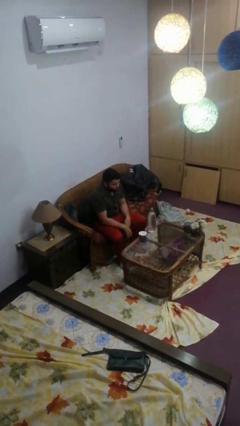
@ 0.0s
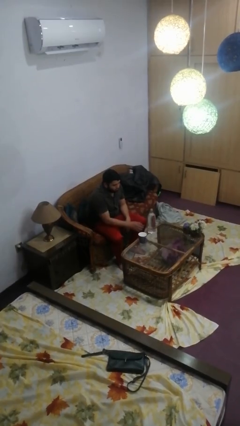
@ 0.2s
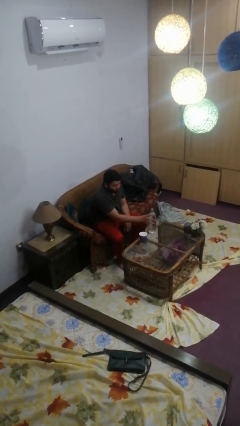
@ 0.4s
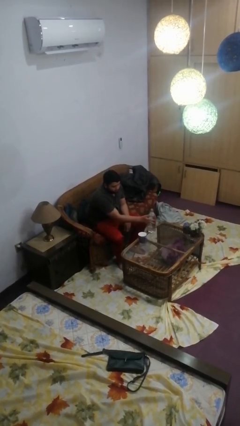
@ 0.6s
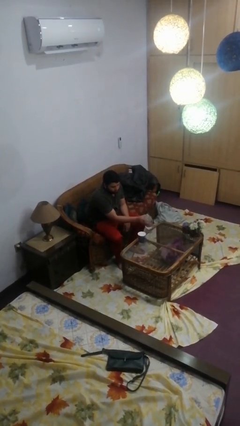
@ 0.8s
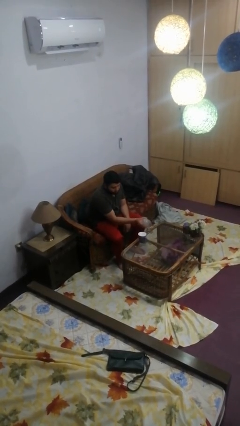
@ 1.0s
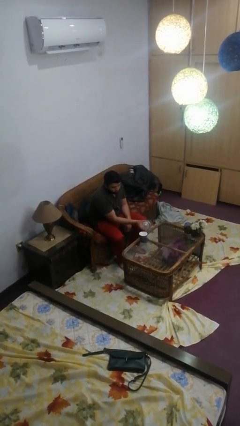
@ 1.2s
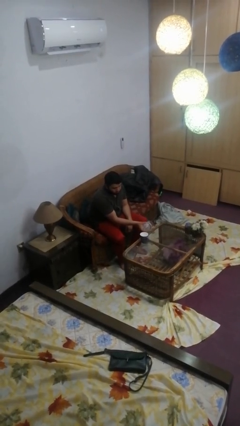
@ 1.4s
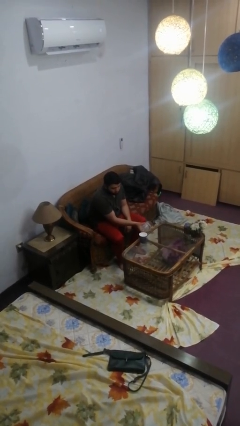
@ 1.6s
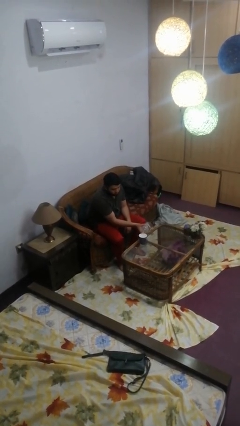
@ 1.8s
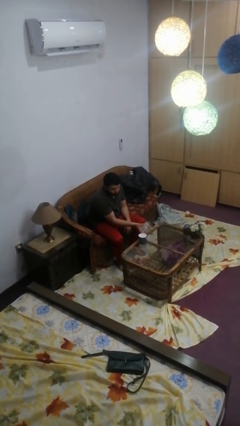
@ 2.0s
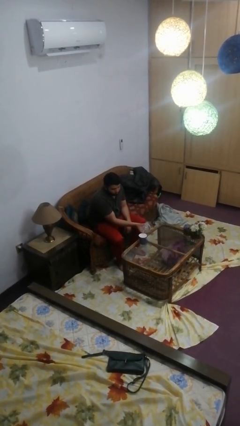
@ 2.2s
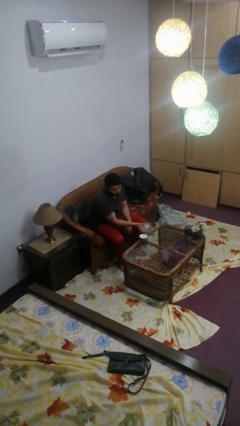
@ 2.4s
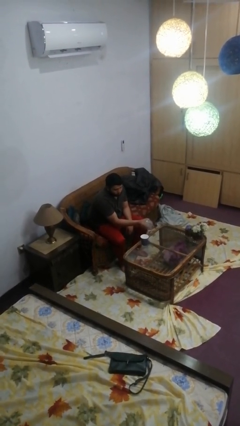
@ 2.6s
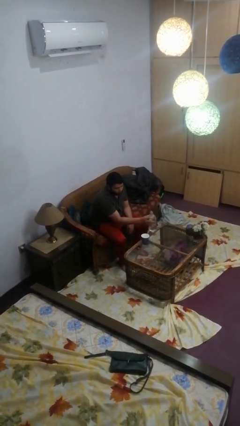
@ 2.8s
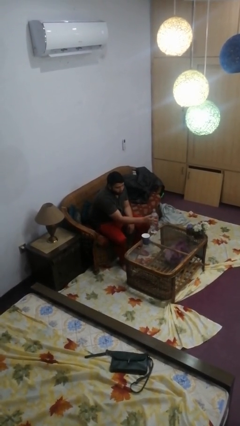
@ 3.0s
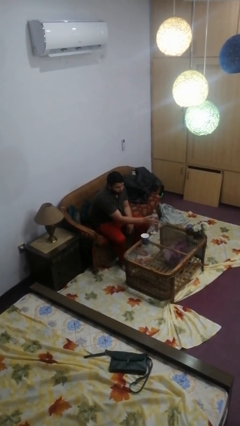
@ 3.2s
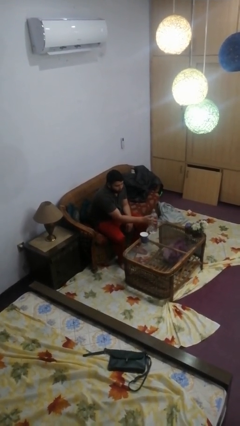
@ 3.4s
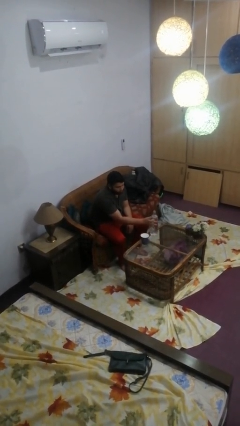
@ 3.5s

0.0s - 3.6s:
person pours liquid into cup

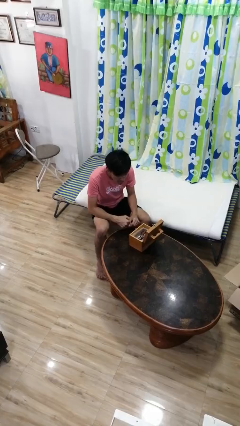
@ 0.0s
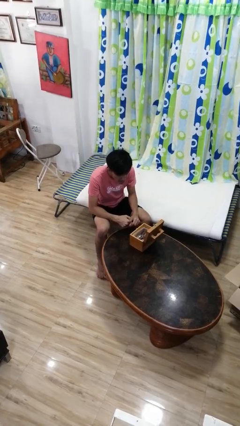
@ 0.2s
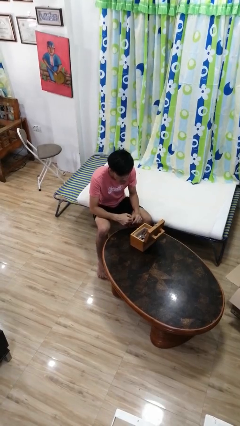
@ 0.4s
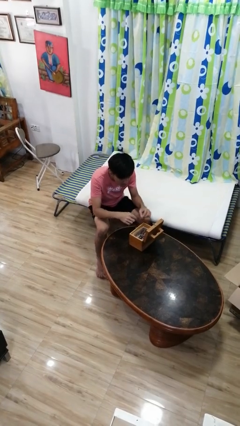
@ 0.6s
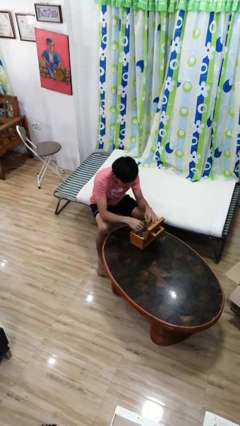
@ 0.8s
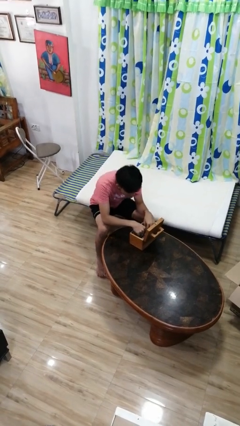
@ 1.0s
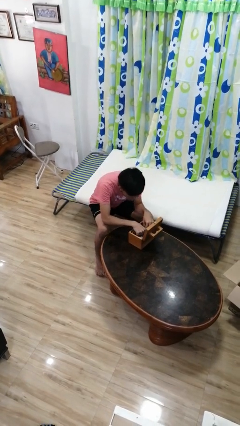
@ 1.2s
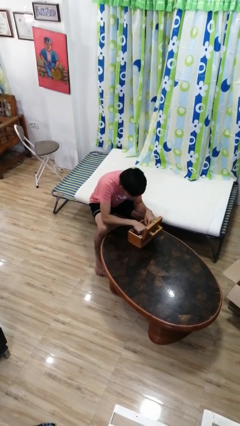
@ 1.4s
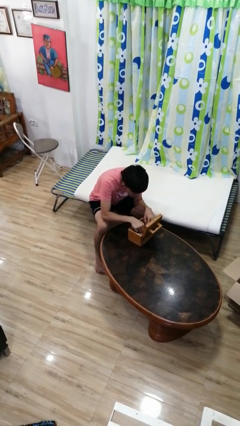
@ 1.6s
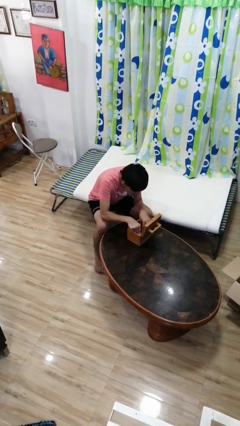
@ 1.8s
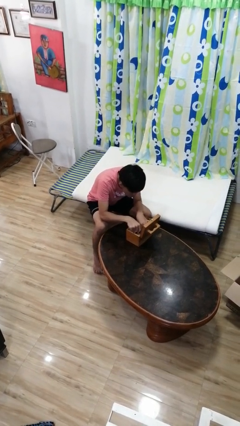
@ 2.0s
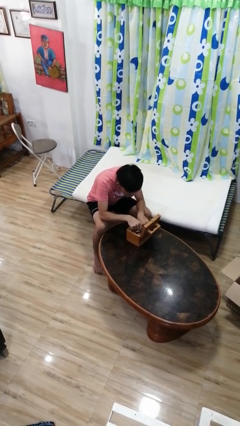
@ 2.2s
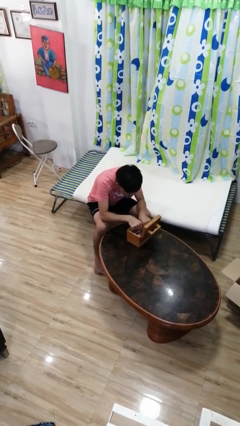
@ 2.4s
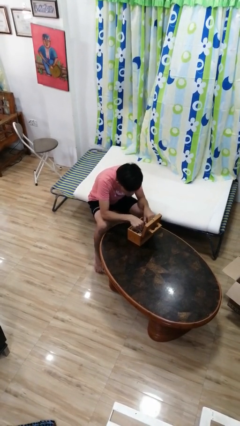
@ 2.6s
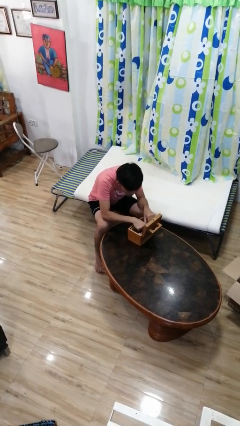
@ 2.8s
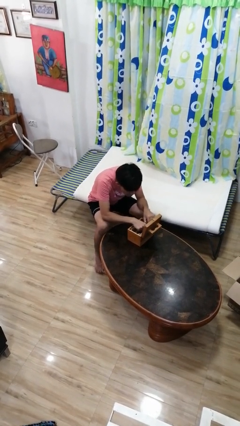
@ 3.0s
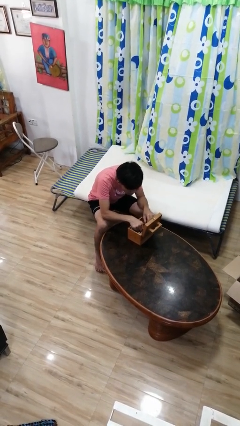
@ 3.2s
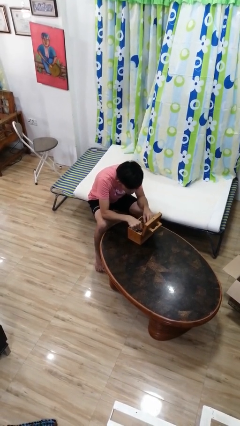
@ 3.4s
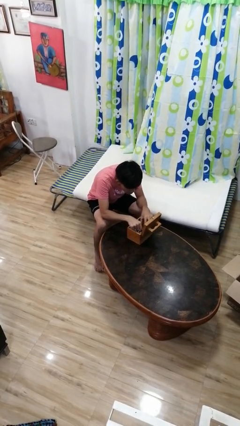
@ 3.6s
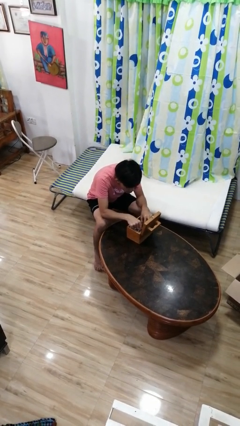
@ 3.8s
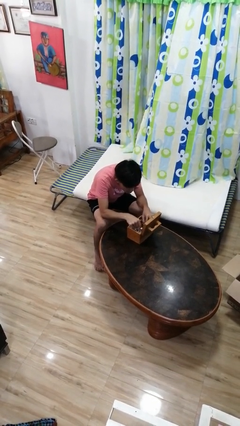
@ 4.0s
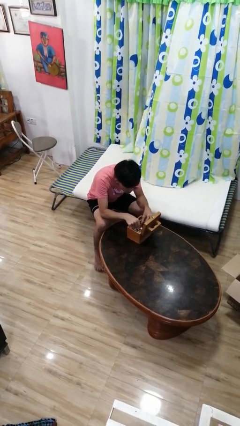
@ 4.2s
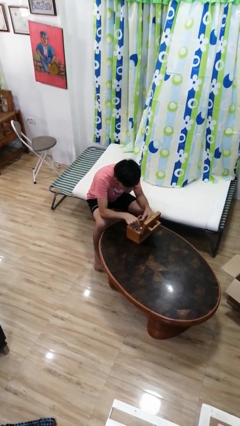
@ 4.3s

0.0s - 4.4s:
person searches jewelry box

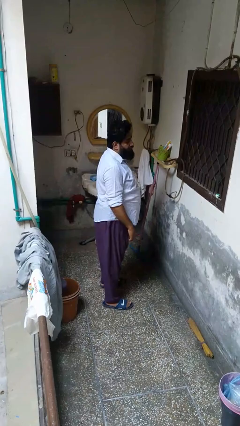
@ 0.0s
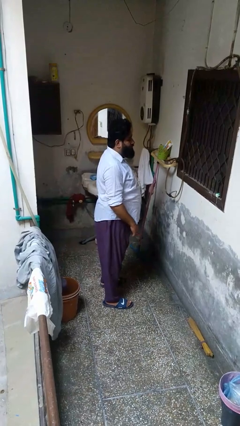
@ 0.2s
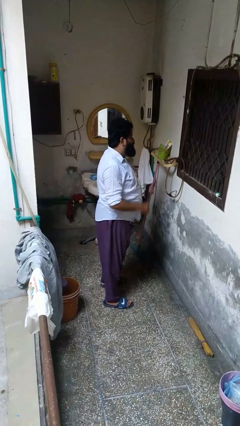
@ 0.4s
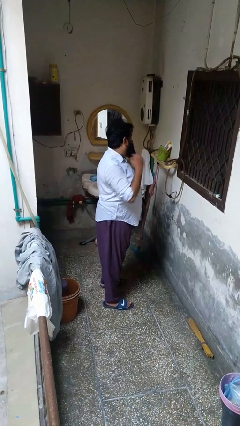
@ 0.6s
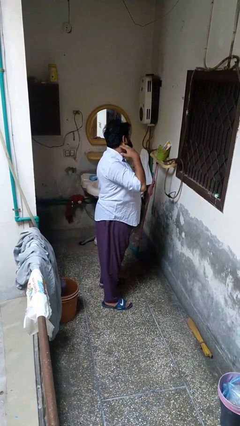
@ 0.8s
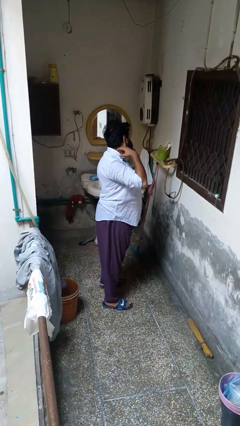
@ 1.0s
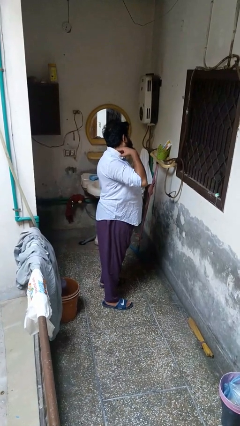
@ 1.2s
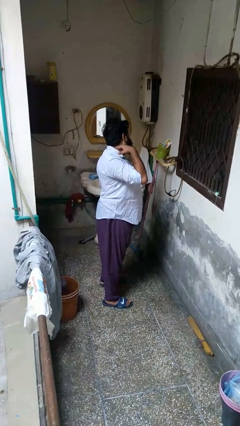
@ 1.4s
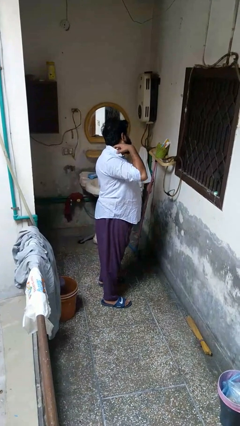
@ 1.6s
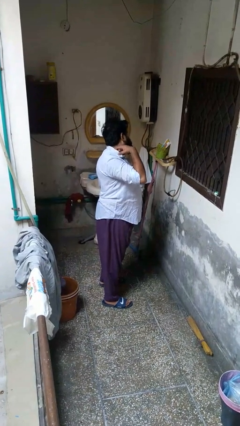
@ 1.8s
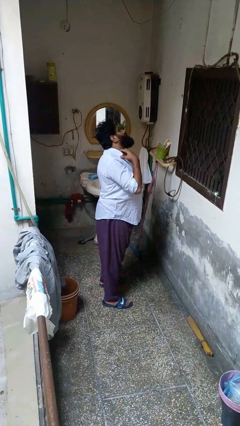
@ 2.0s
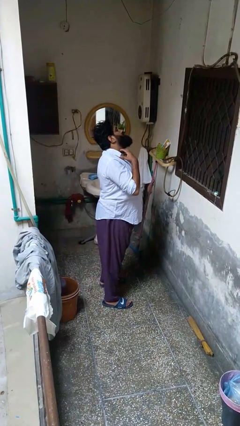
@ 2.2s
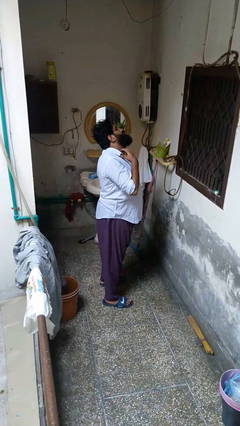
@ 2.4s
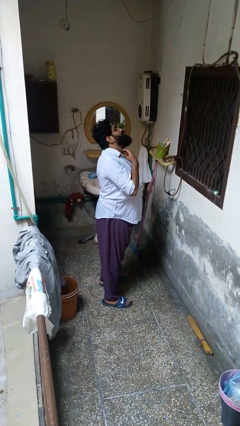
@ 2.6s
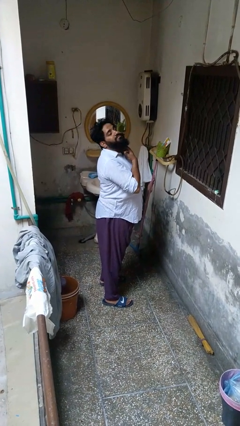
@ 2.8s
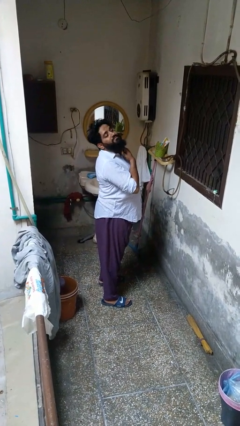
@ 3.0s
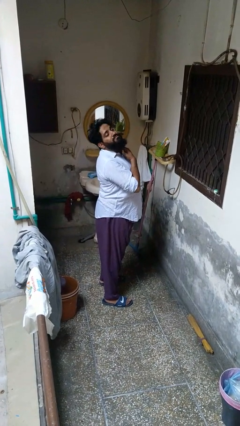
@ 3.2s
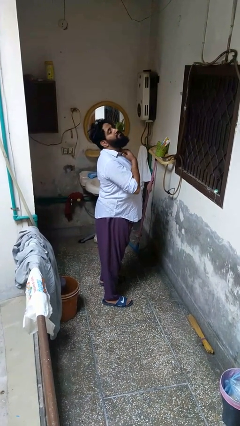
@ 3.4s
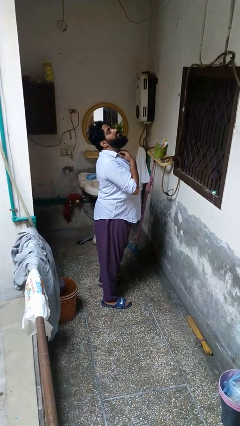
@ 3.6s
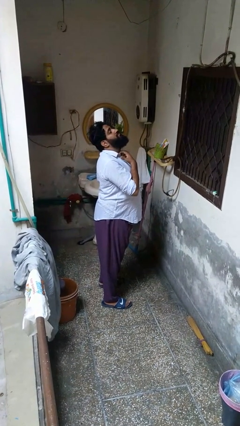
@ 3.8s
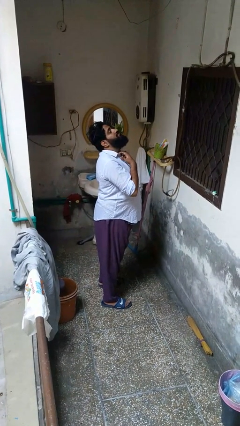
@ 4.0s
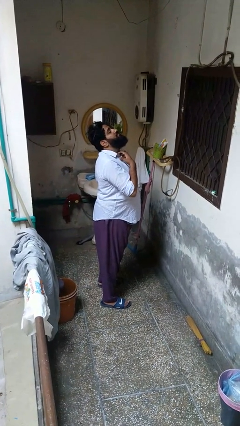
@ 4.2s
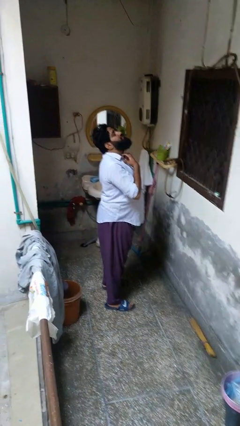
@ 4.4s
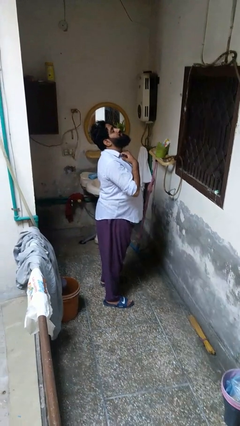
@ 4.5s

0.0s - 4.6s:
person rubs neck

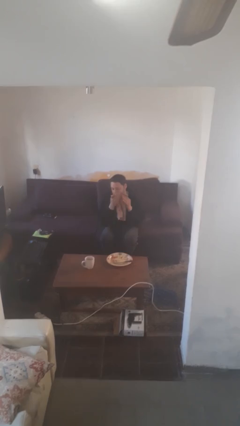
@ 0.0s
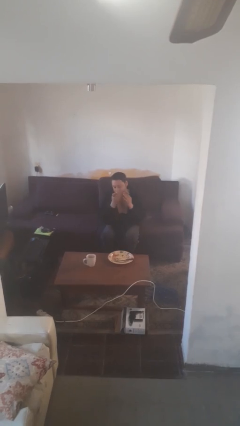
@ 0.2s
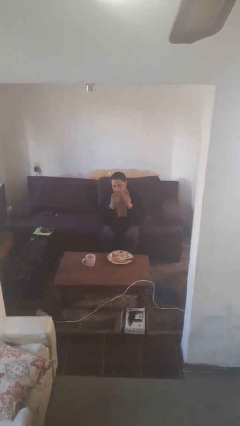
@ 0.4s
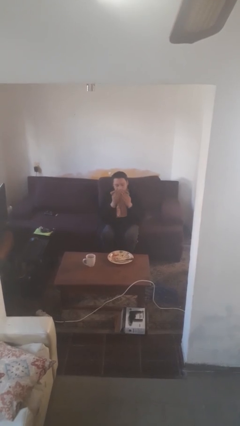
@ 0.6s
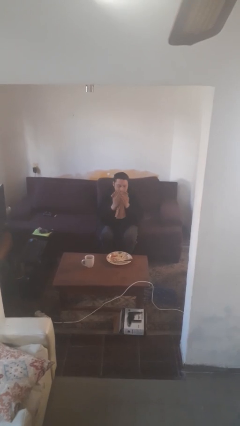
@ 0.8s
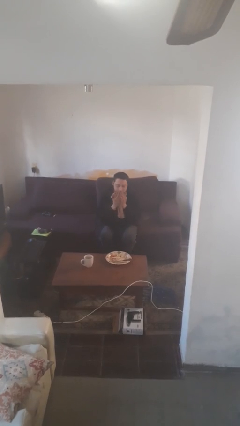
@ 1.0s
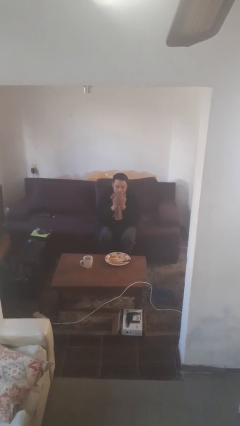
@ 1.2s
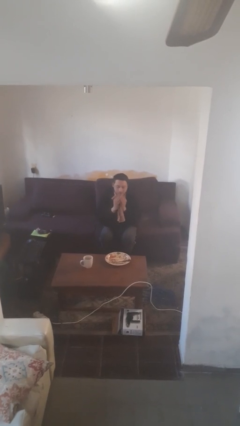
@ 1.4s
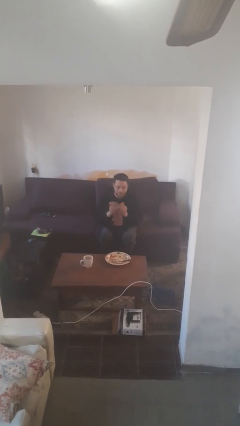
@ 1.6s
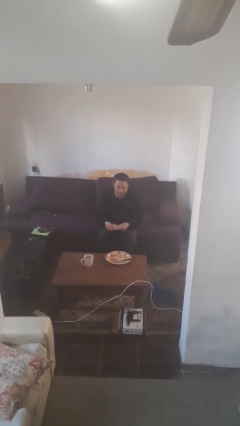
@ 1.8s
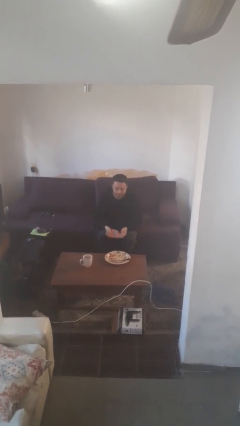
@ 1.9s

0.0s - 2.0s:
person wipes mouth with napkin

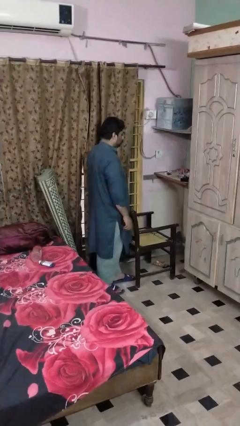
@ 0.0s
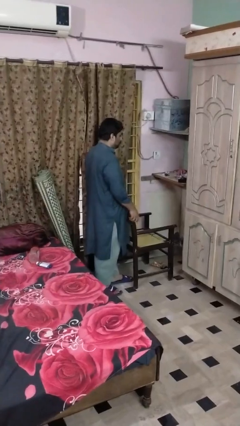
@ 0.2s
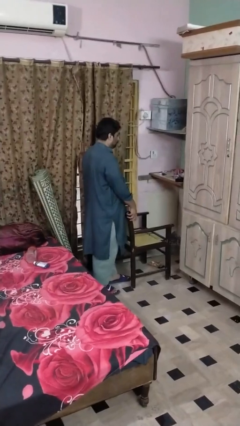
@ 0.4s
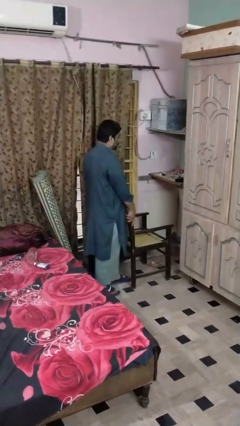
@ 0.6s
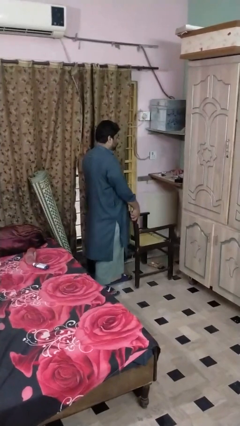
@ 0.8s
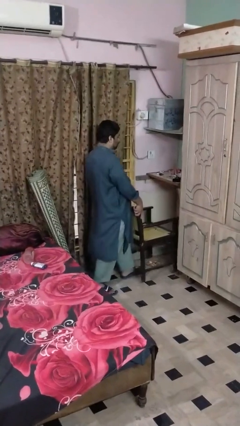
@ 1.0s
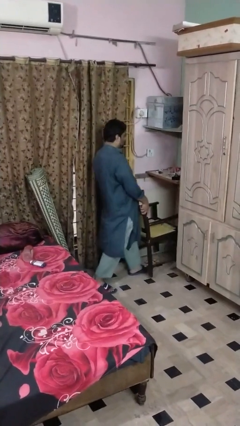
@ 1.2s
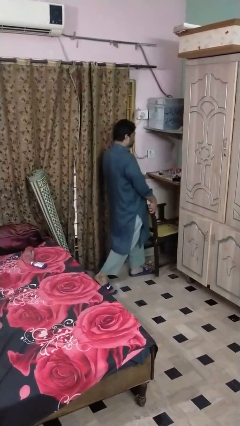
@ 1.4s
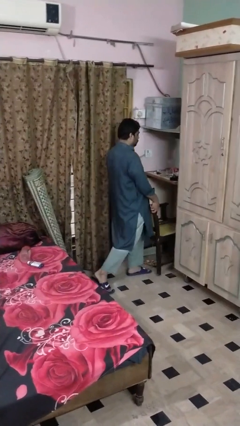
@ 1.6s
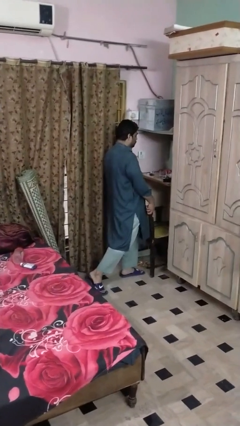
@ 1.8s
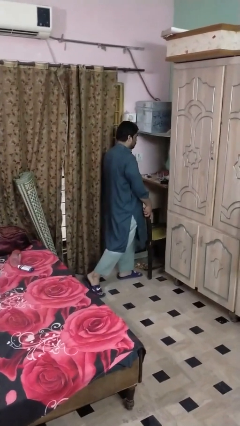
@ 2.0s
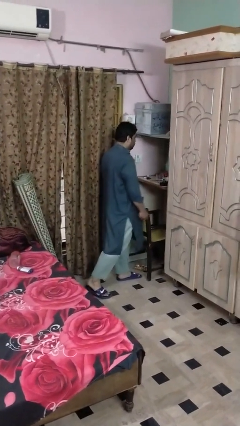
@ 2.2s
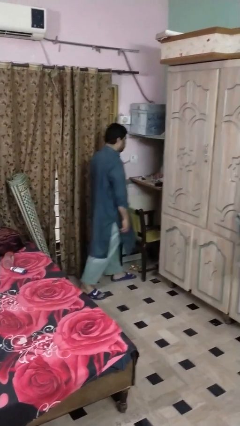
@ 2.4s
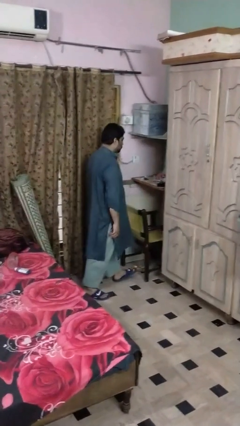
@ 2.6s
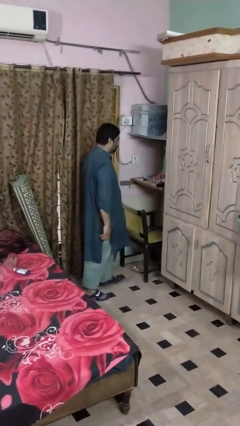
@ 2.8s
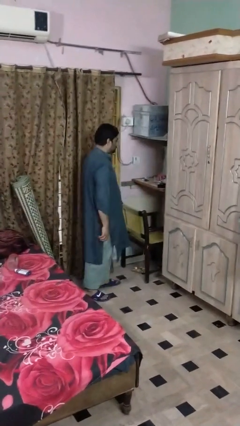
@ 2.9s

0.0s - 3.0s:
person pushes in chair

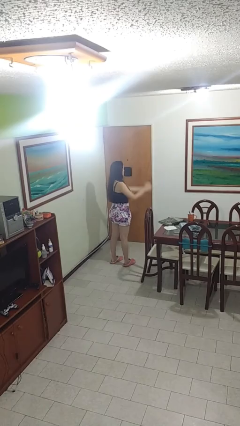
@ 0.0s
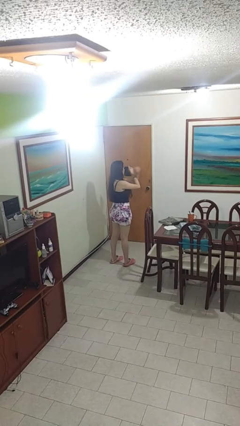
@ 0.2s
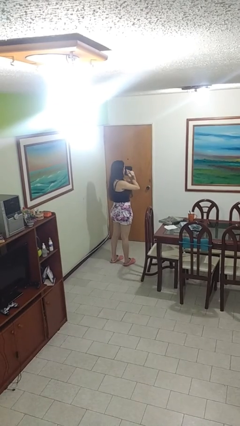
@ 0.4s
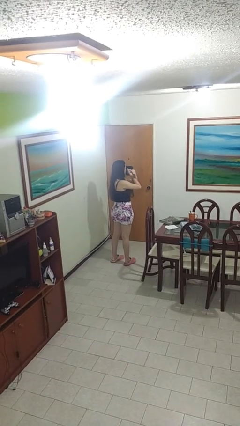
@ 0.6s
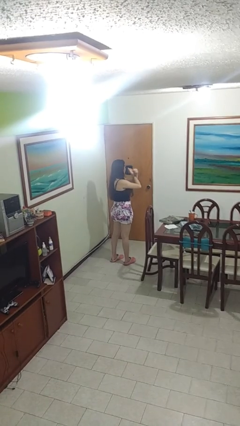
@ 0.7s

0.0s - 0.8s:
person gestures arms x
